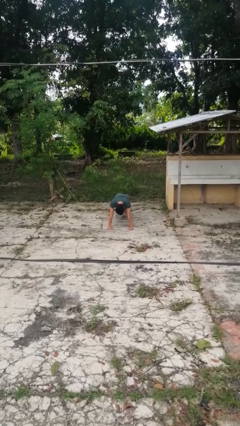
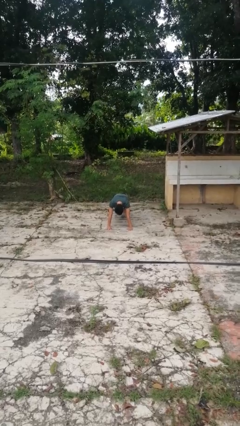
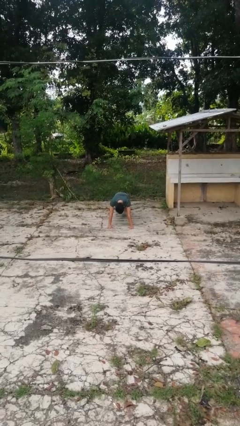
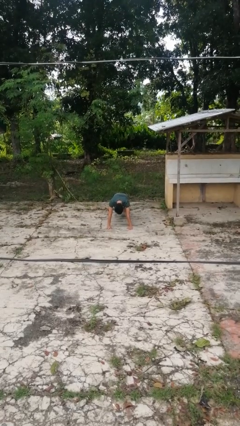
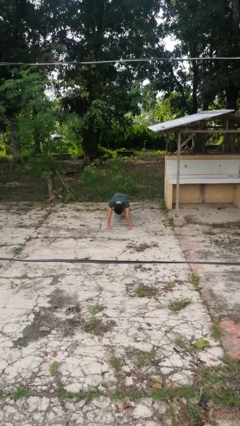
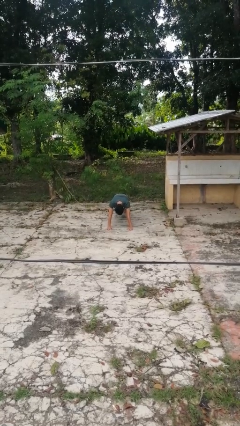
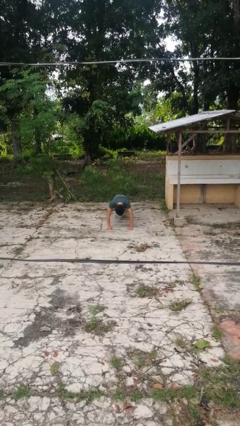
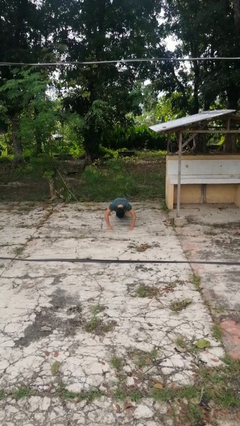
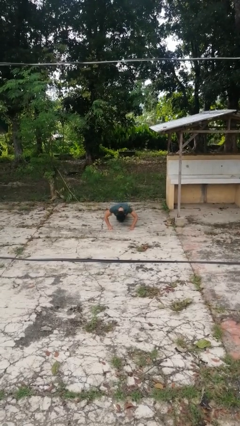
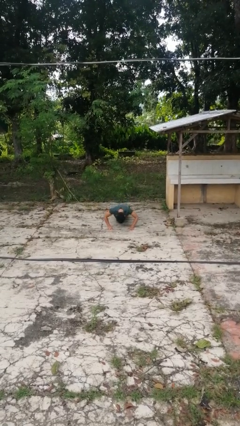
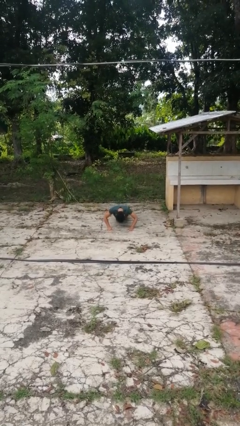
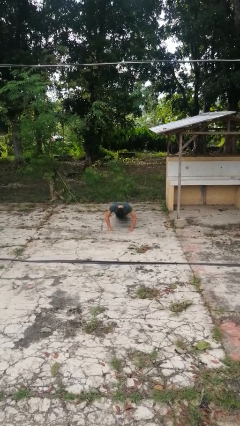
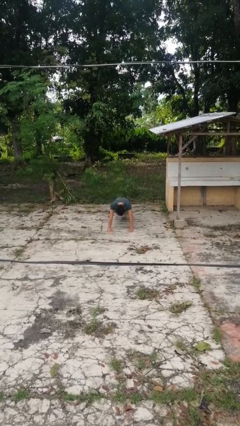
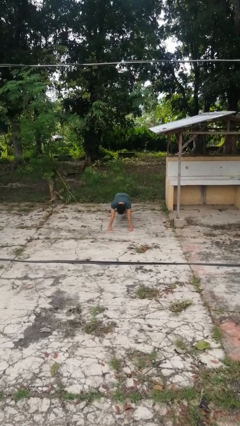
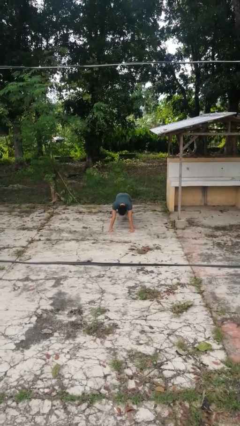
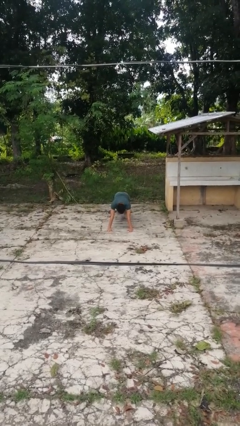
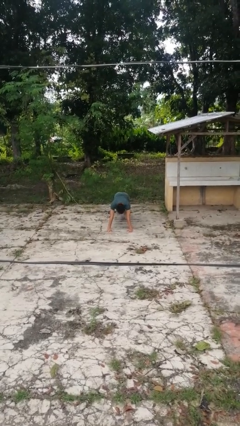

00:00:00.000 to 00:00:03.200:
person exercises with pushup

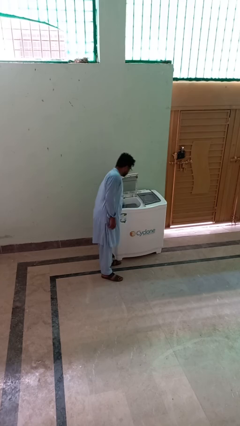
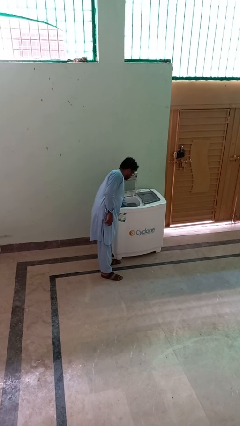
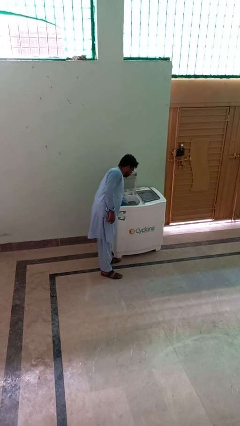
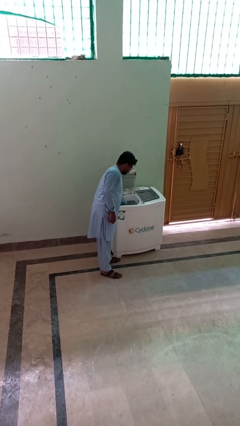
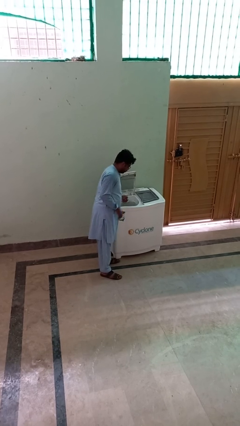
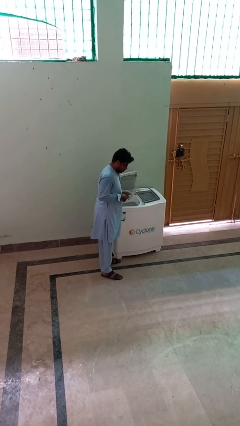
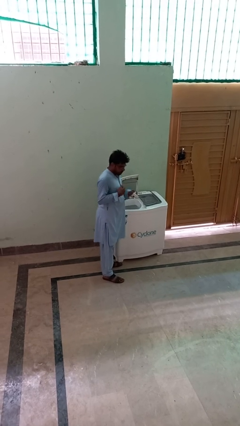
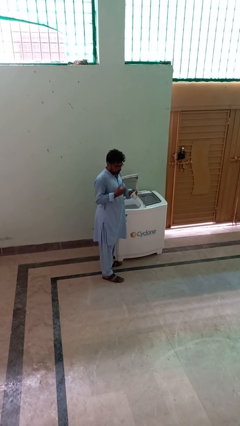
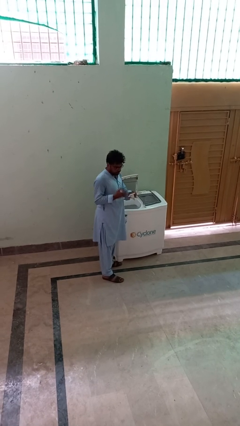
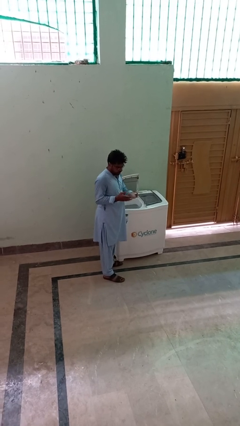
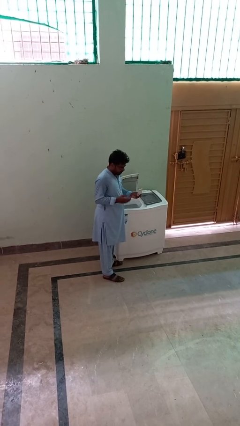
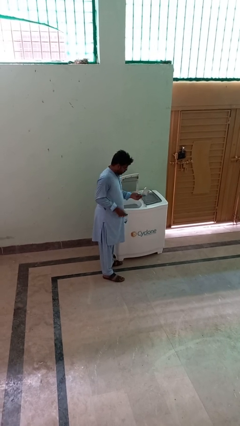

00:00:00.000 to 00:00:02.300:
person cleans dryer lint trap

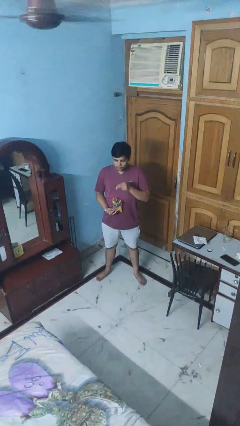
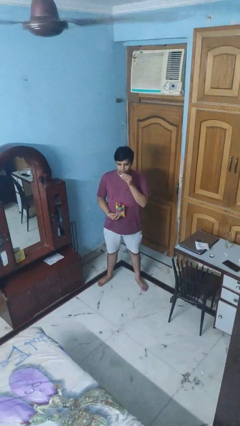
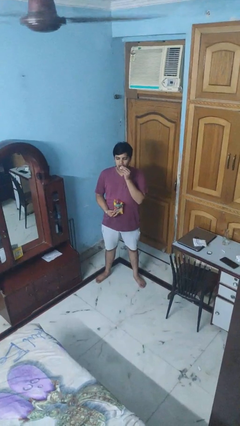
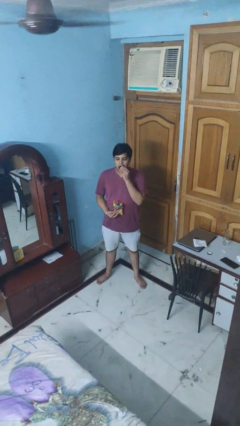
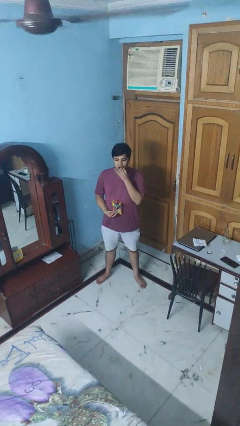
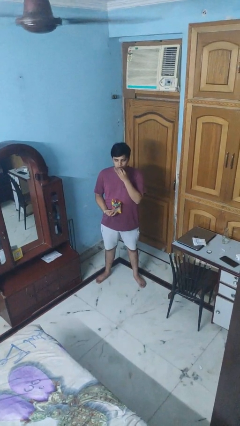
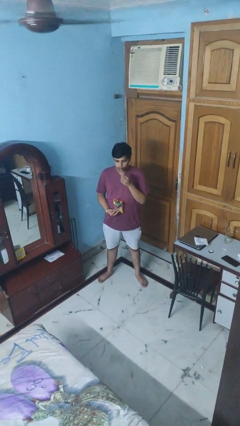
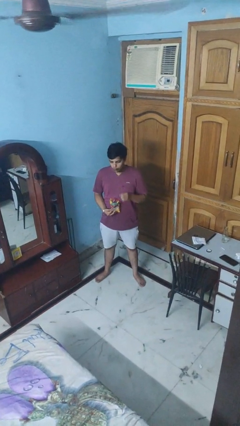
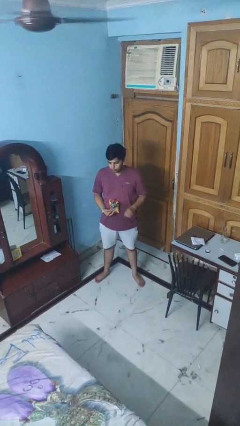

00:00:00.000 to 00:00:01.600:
person eats snack from bag

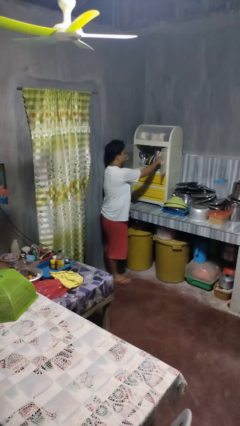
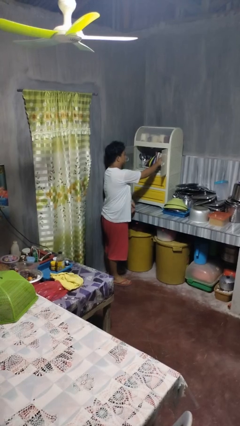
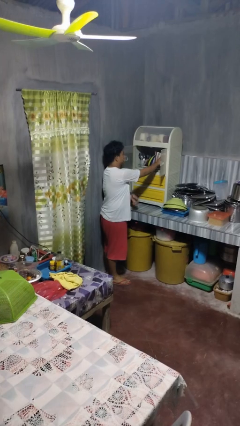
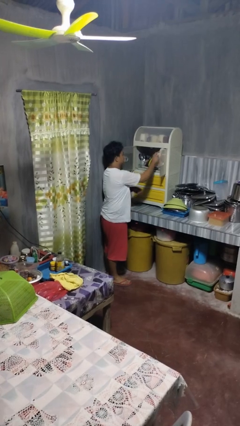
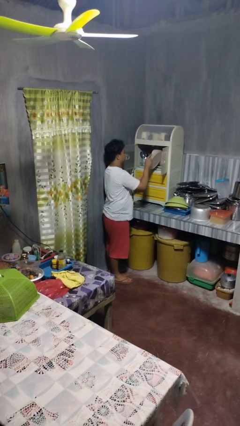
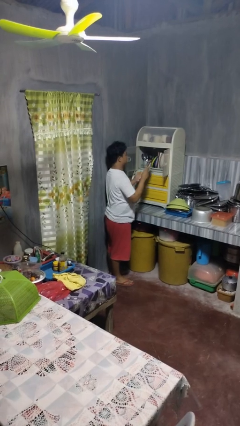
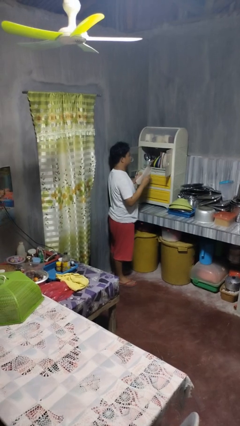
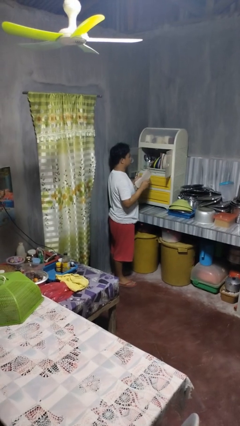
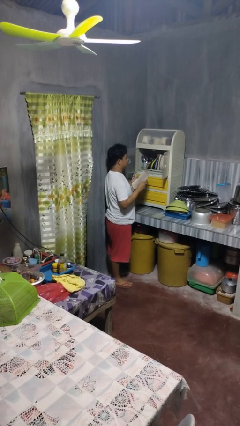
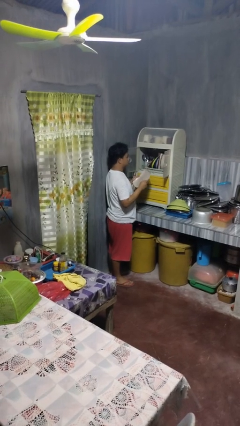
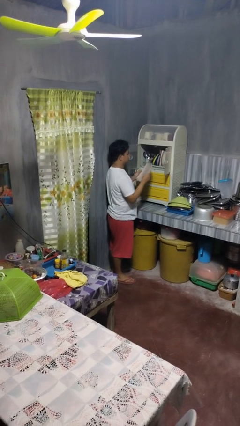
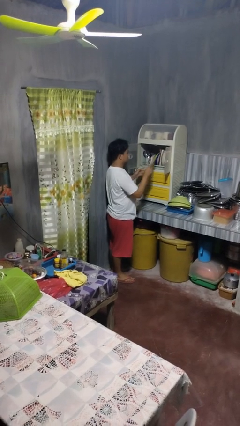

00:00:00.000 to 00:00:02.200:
person picks up object from cabinet

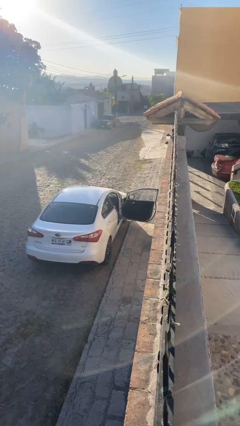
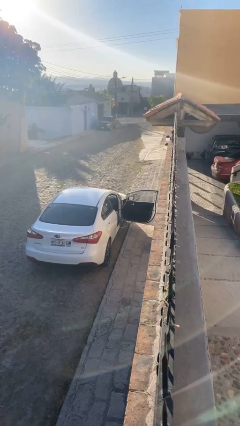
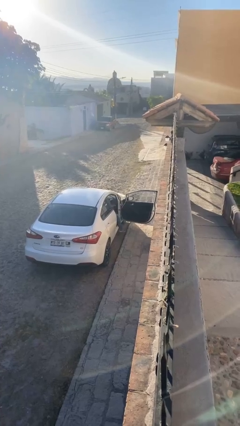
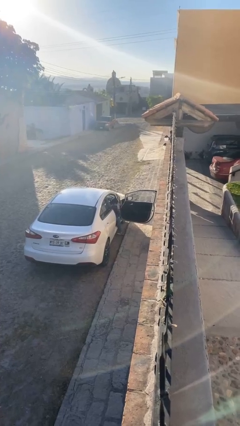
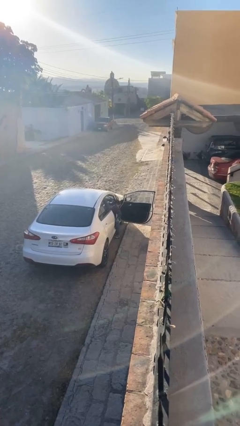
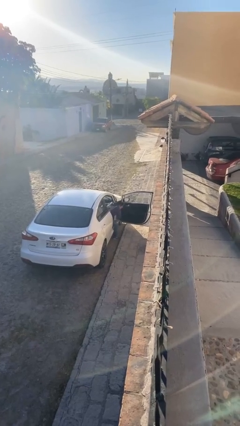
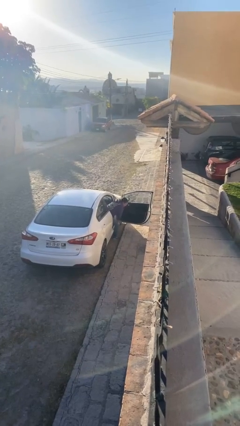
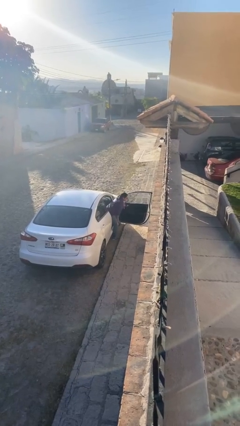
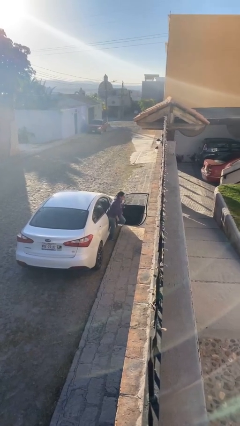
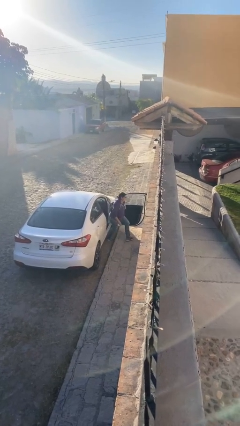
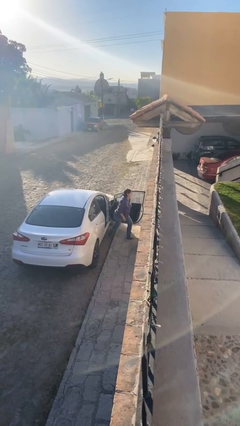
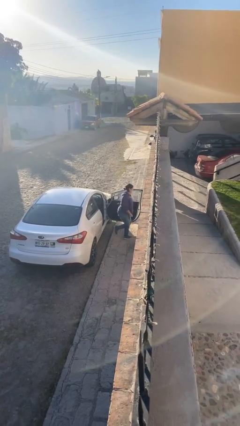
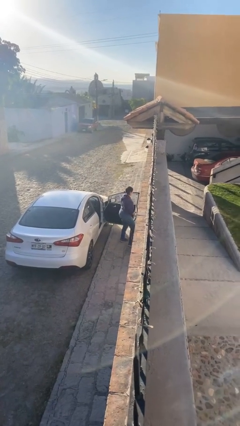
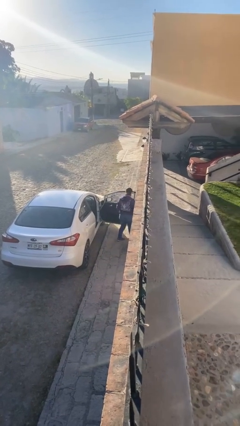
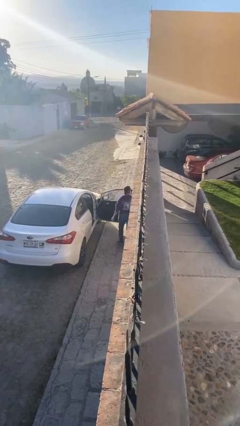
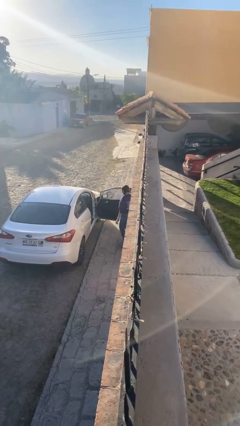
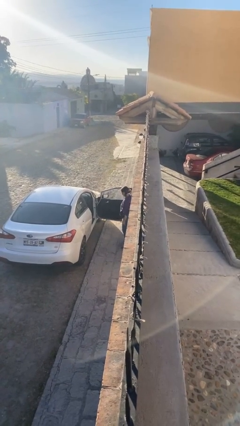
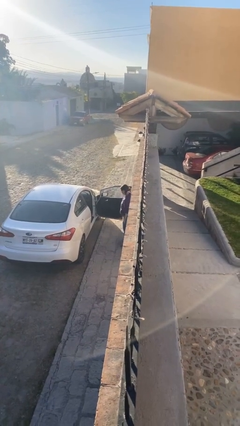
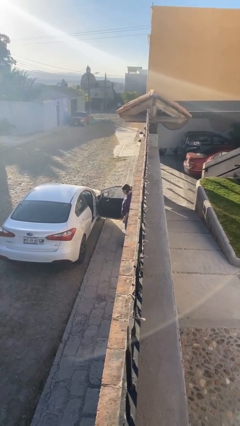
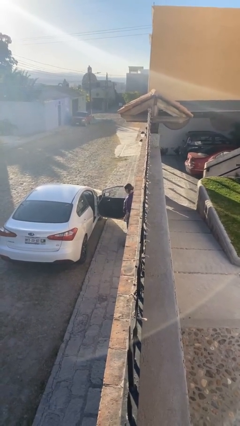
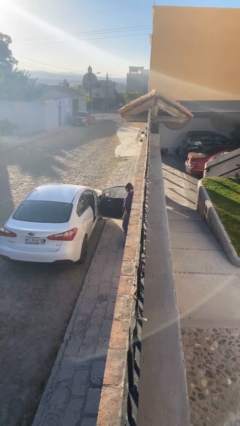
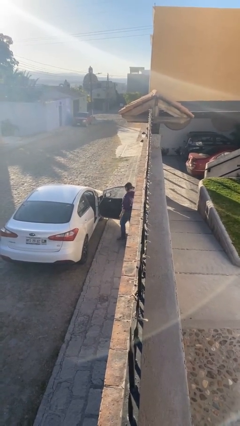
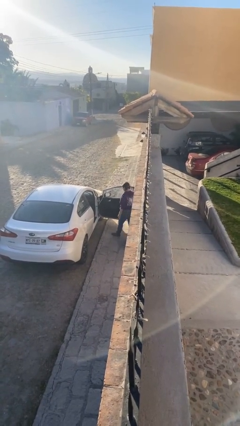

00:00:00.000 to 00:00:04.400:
person exits car

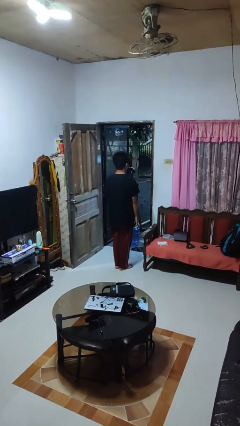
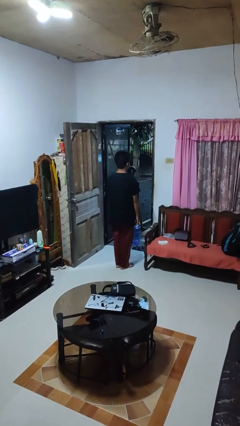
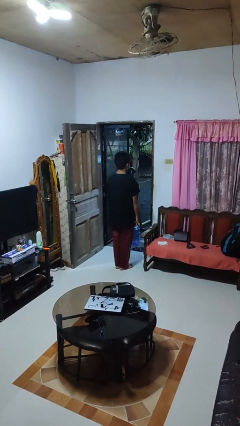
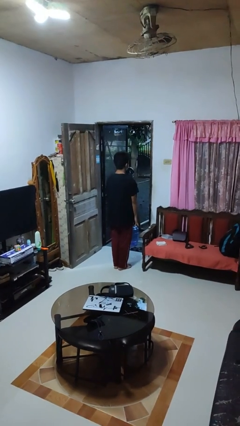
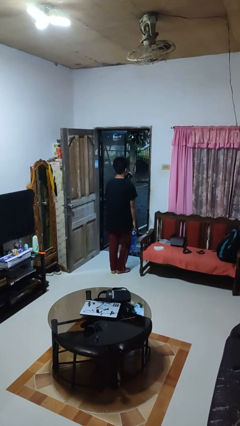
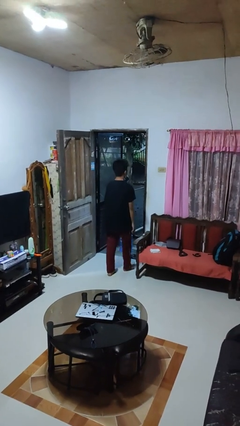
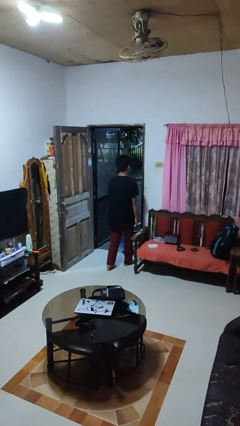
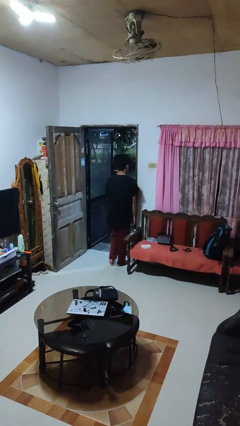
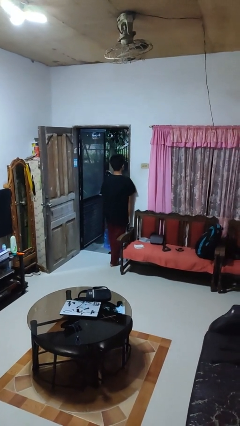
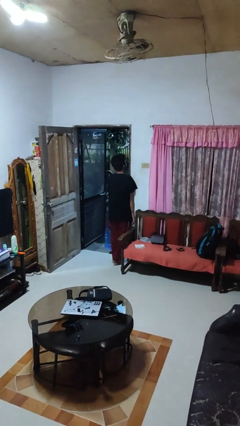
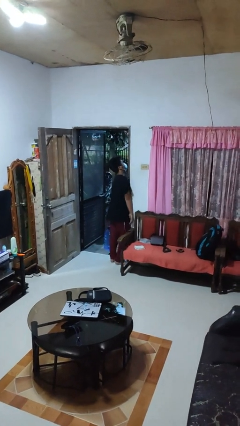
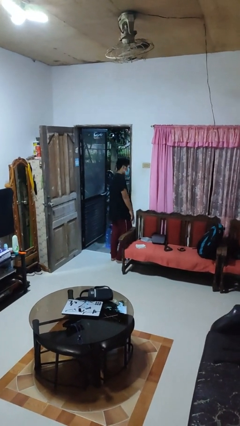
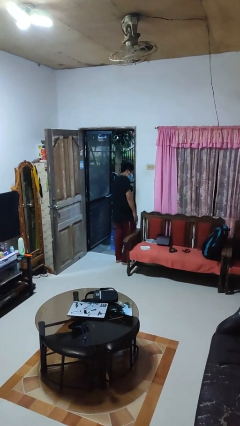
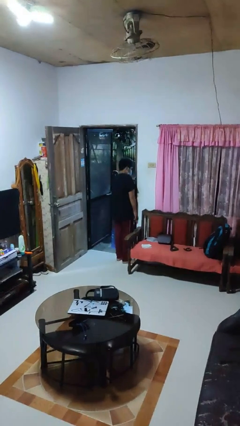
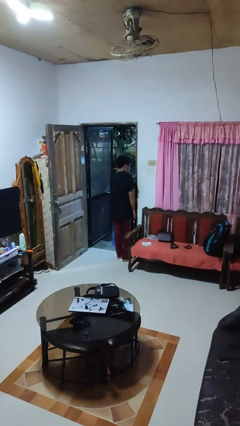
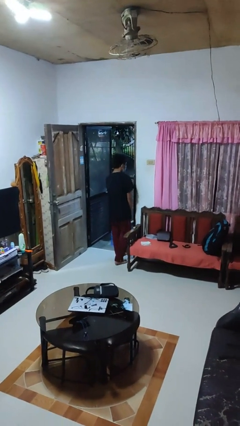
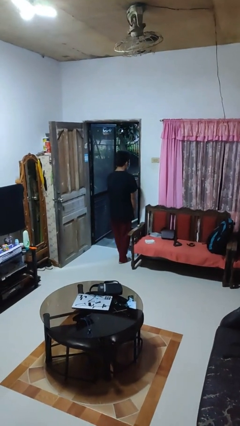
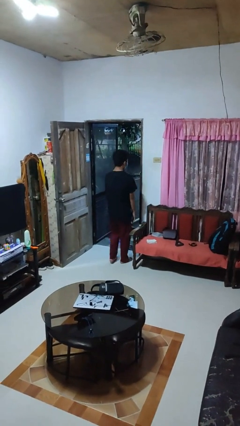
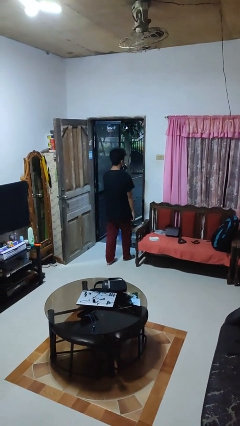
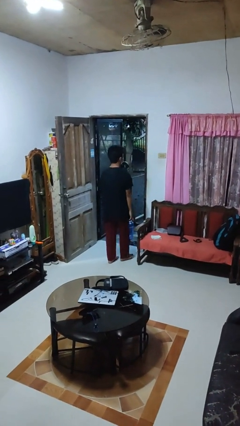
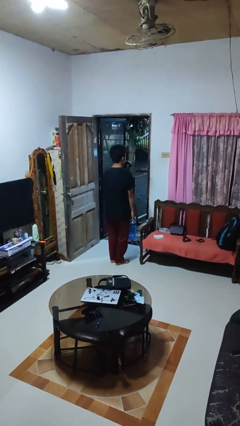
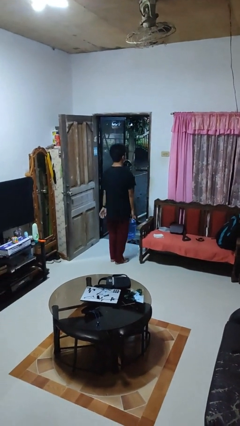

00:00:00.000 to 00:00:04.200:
person bumps into wall
